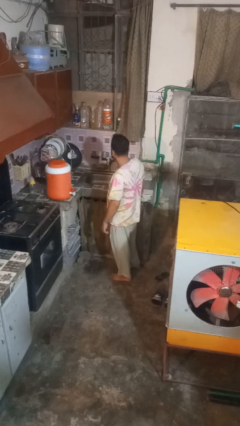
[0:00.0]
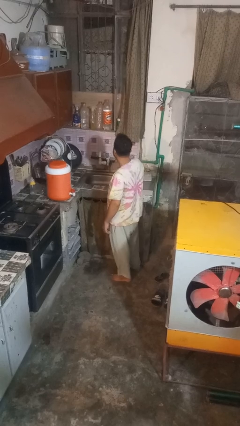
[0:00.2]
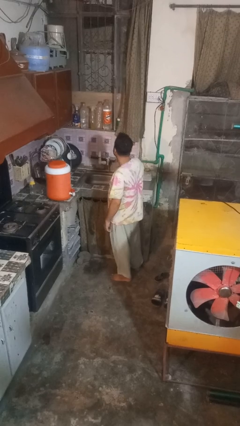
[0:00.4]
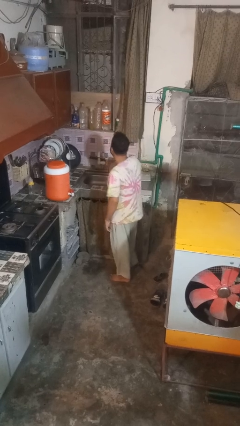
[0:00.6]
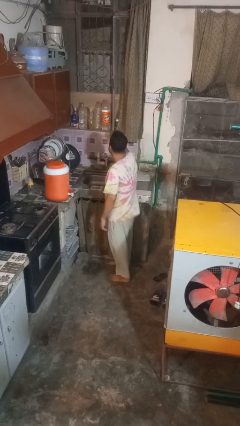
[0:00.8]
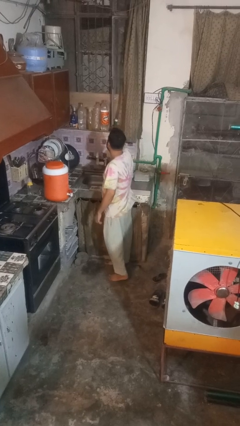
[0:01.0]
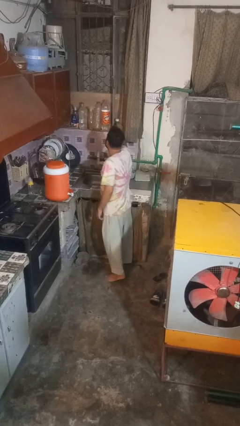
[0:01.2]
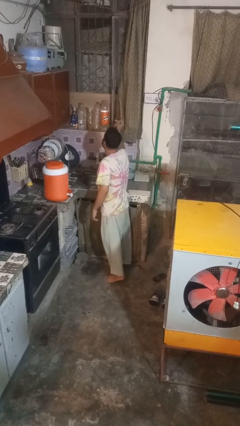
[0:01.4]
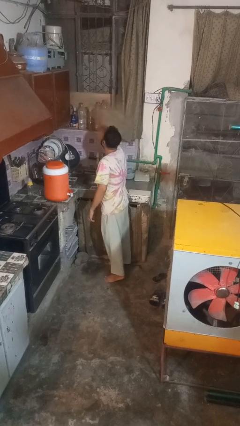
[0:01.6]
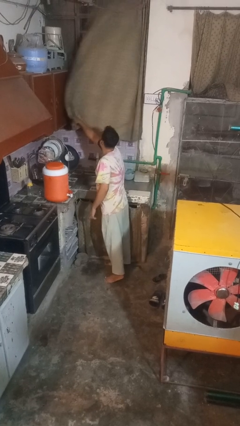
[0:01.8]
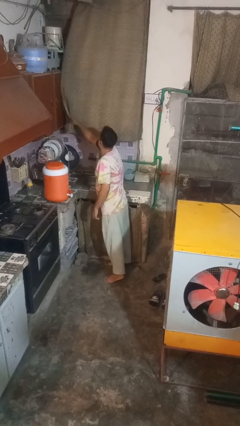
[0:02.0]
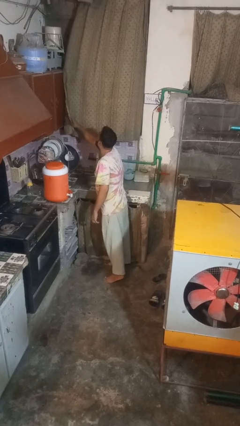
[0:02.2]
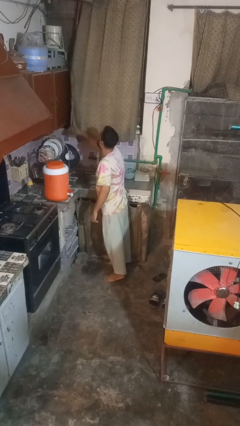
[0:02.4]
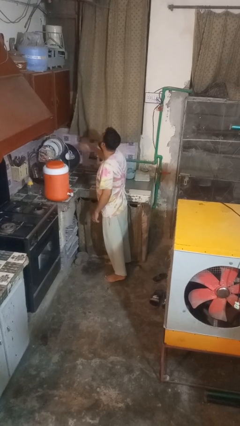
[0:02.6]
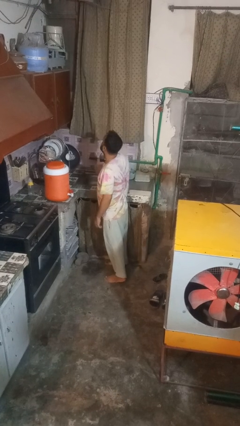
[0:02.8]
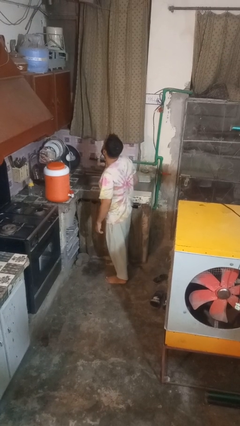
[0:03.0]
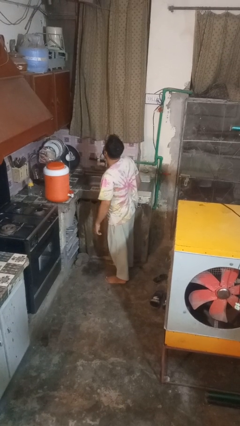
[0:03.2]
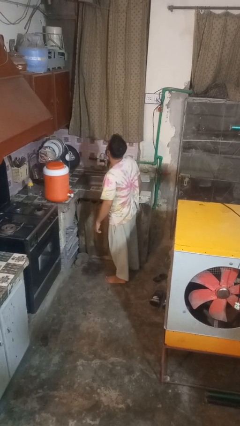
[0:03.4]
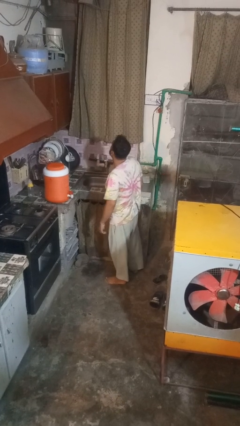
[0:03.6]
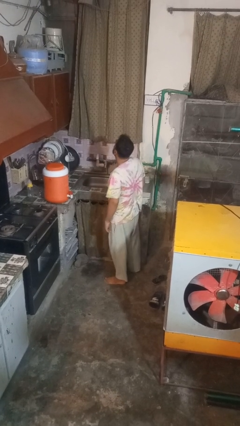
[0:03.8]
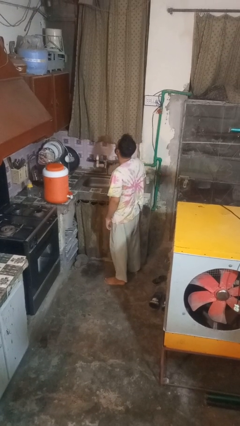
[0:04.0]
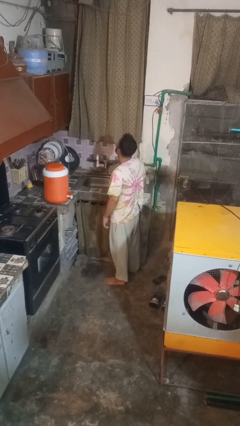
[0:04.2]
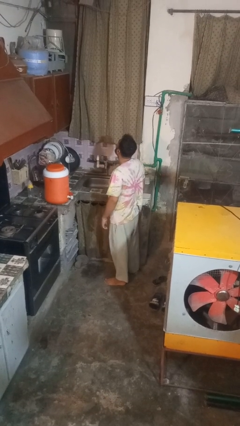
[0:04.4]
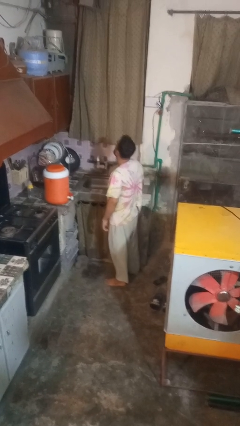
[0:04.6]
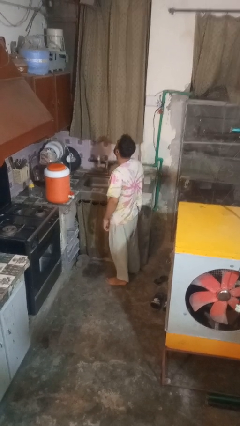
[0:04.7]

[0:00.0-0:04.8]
person closes curtains

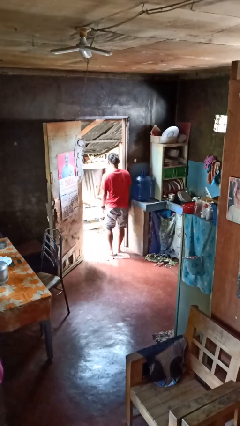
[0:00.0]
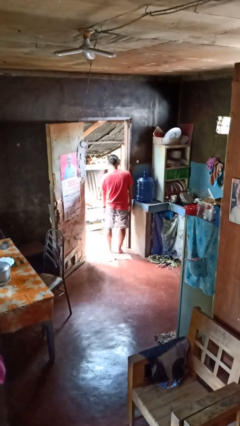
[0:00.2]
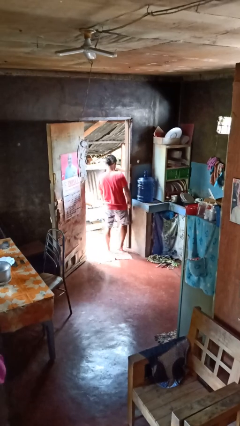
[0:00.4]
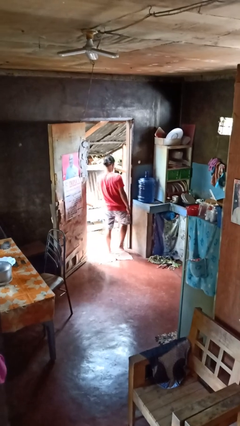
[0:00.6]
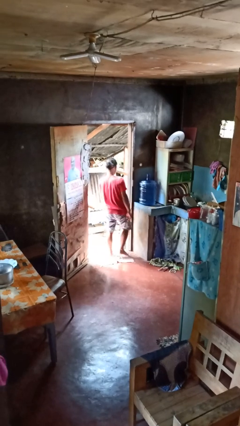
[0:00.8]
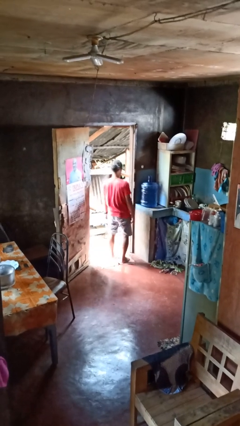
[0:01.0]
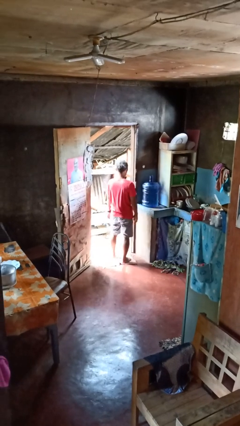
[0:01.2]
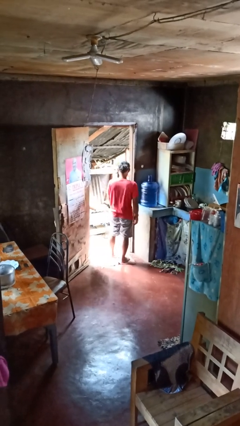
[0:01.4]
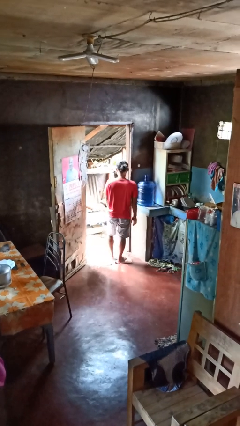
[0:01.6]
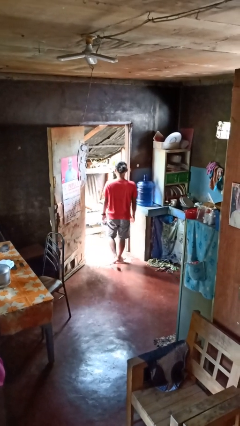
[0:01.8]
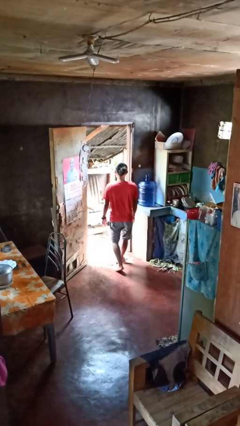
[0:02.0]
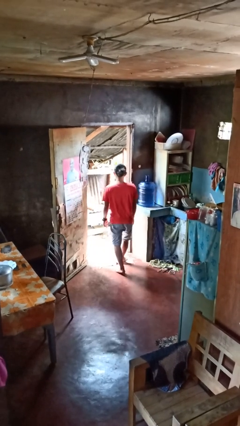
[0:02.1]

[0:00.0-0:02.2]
person bumps into wall

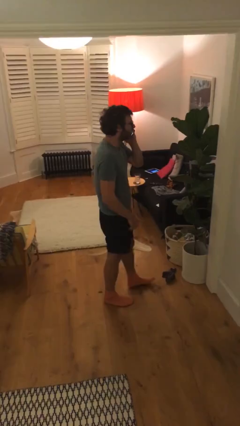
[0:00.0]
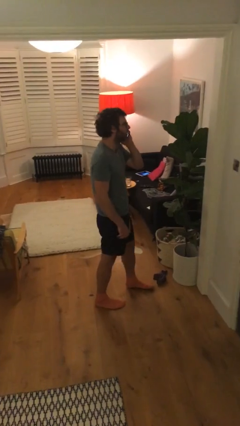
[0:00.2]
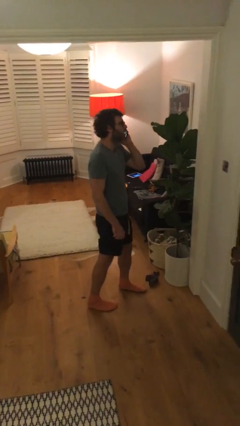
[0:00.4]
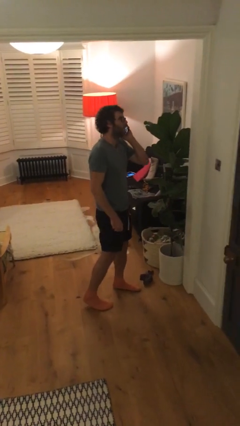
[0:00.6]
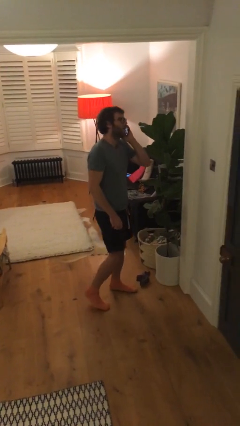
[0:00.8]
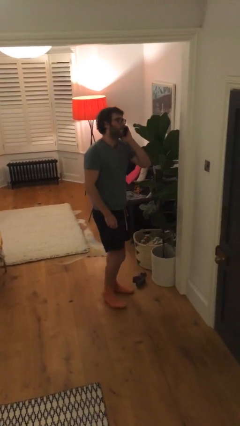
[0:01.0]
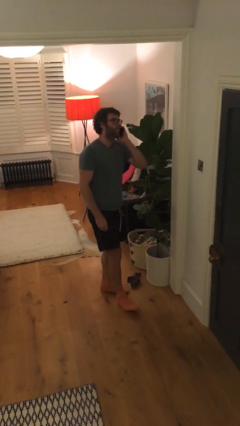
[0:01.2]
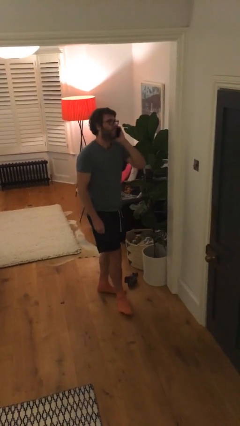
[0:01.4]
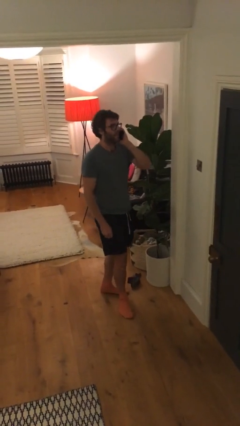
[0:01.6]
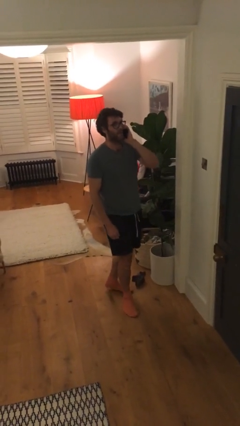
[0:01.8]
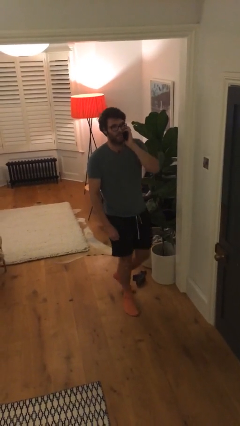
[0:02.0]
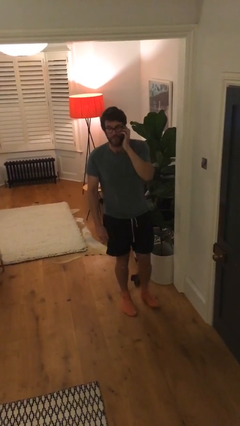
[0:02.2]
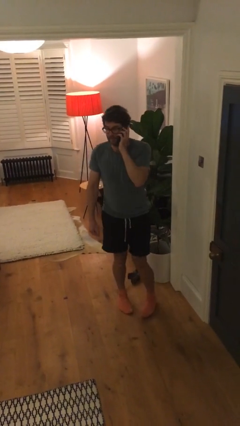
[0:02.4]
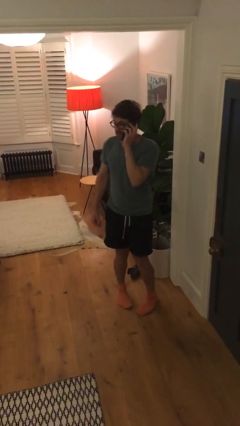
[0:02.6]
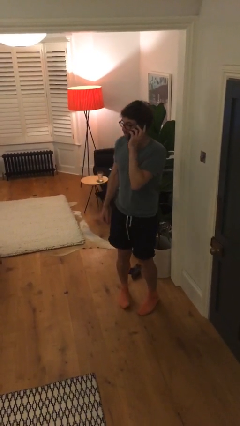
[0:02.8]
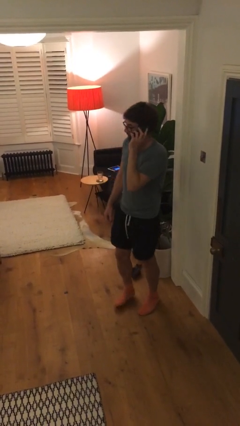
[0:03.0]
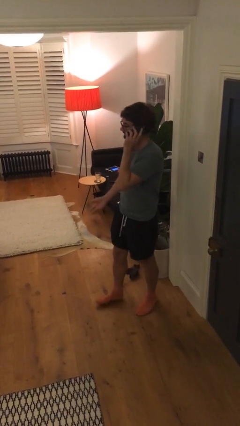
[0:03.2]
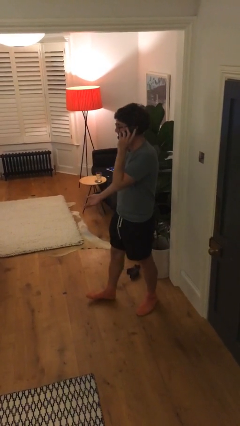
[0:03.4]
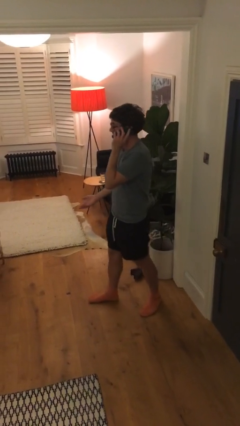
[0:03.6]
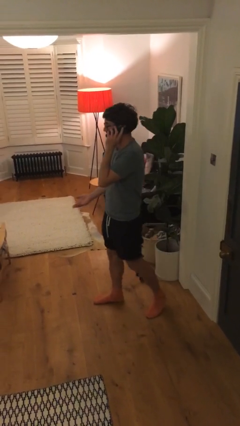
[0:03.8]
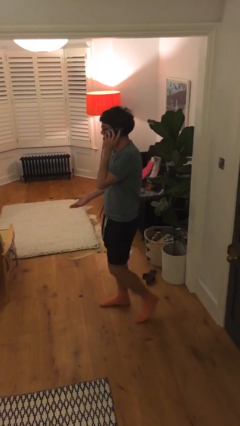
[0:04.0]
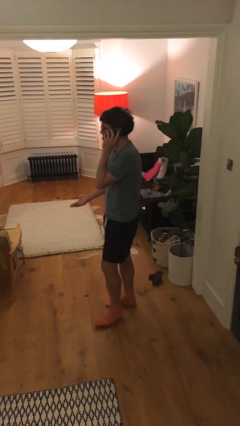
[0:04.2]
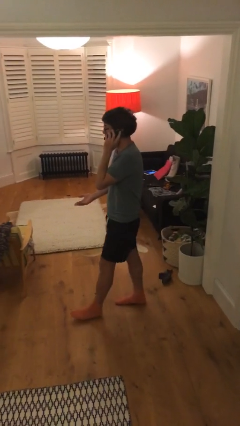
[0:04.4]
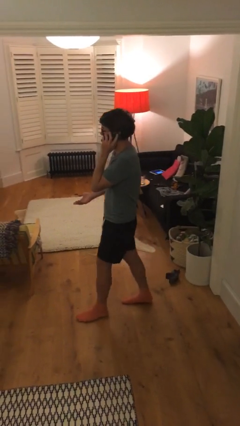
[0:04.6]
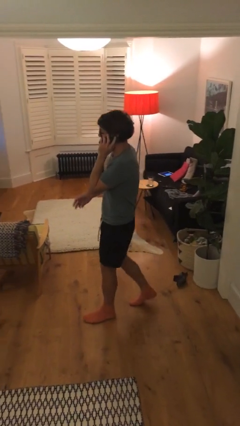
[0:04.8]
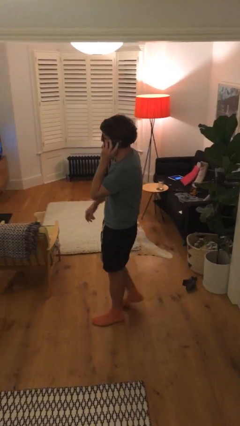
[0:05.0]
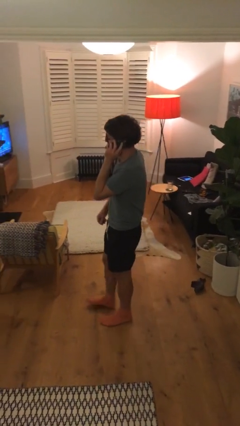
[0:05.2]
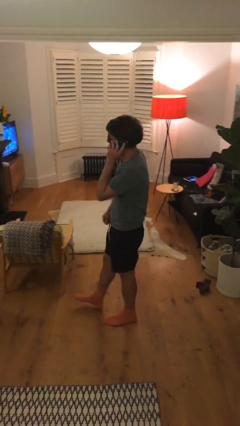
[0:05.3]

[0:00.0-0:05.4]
person talks on phone

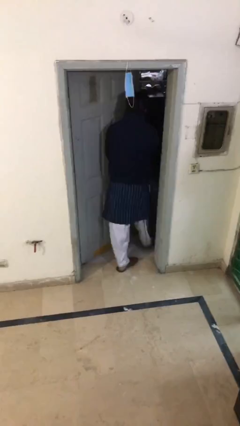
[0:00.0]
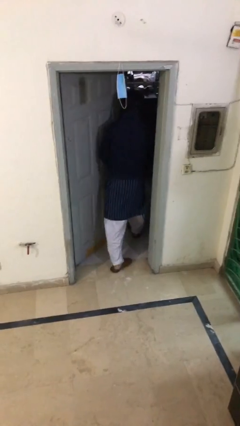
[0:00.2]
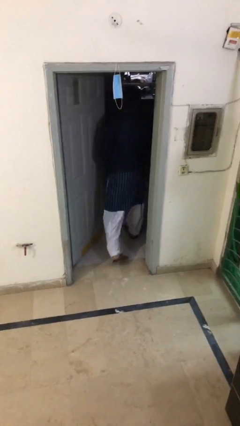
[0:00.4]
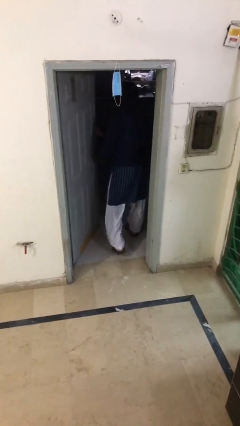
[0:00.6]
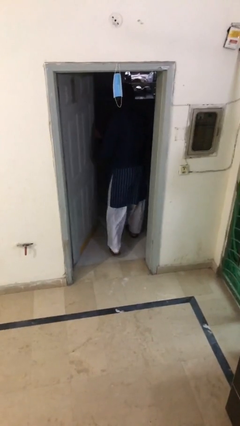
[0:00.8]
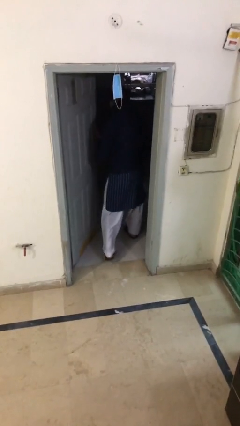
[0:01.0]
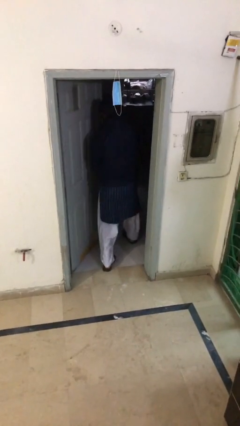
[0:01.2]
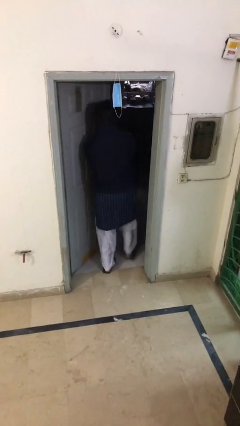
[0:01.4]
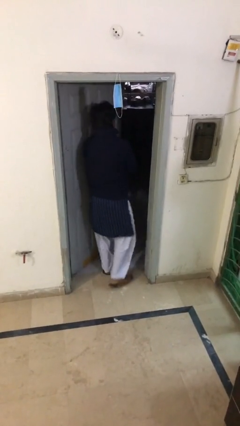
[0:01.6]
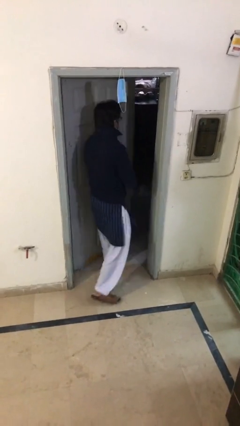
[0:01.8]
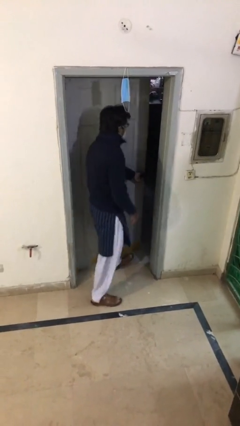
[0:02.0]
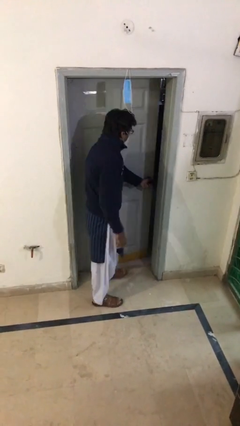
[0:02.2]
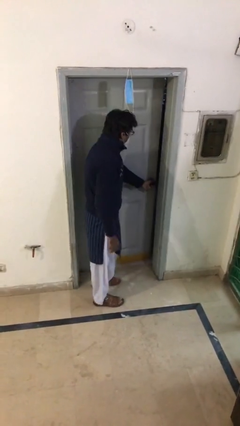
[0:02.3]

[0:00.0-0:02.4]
person closes facility door

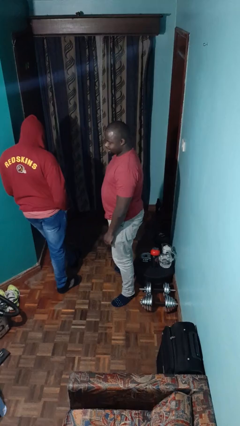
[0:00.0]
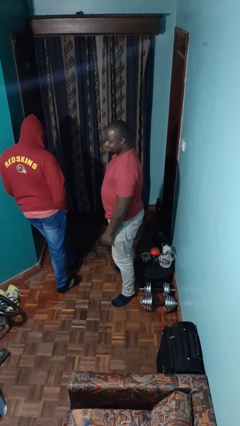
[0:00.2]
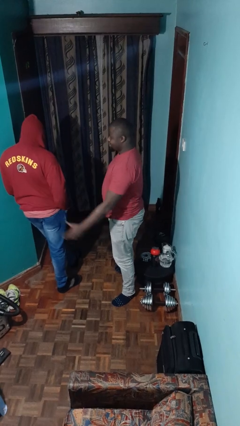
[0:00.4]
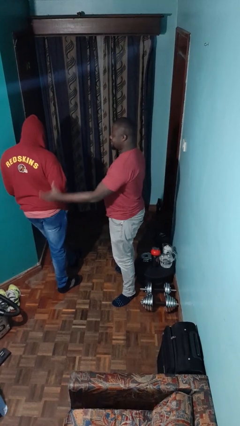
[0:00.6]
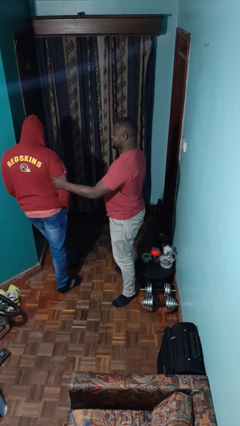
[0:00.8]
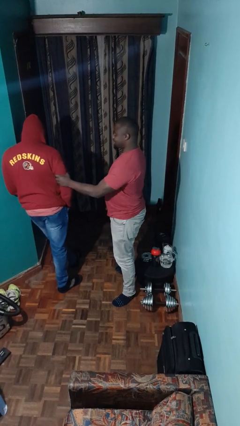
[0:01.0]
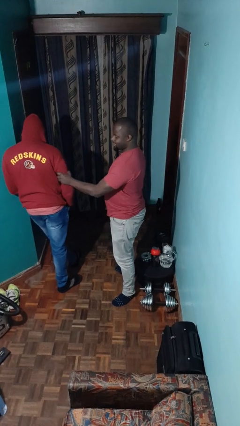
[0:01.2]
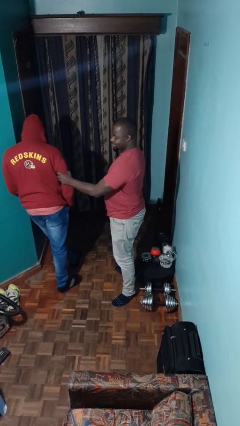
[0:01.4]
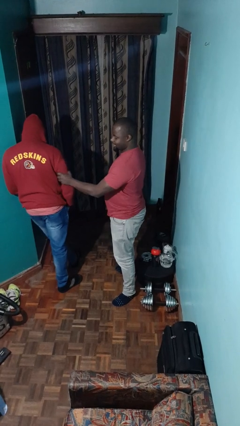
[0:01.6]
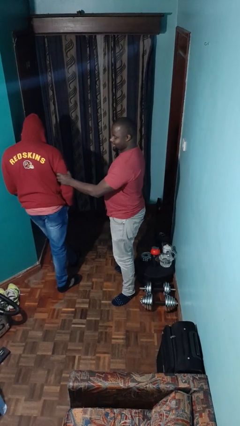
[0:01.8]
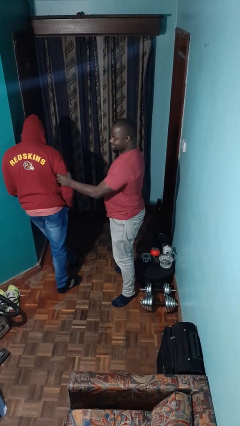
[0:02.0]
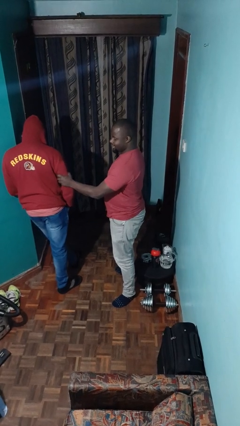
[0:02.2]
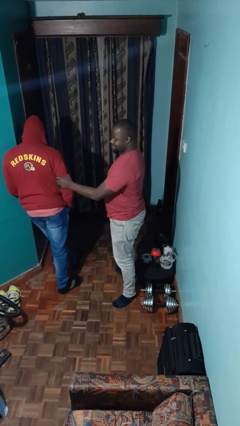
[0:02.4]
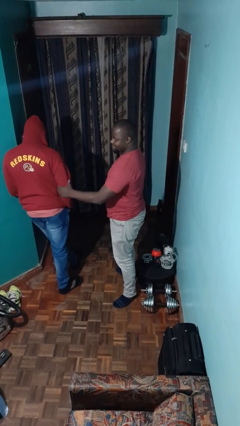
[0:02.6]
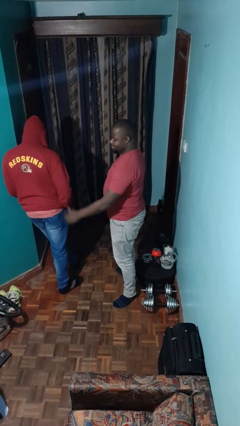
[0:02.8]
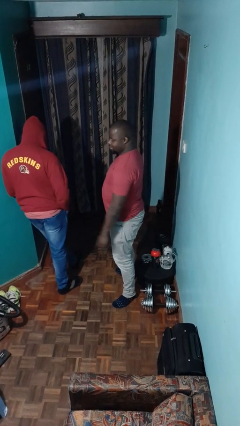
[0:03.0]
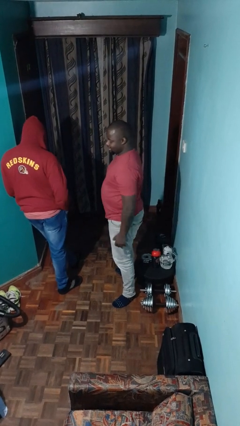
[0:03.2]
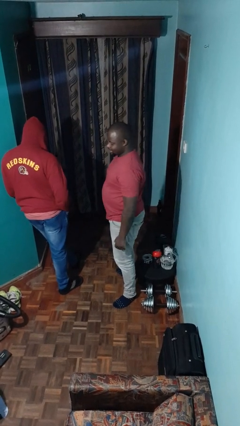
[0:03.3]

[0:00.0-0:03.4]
person grabs person by bicep
